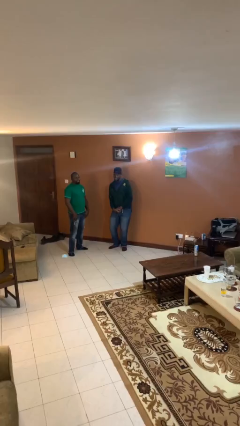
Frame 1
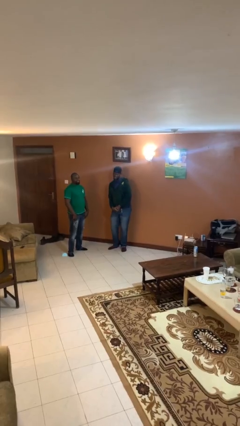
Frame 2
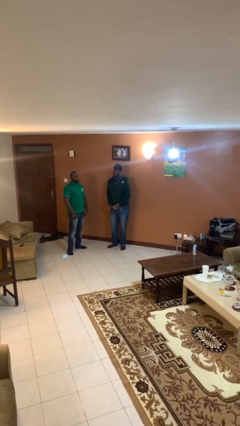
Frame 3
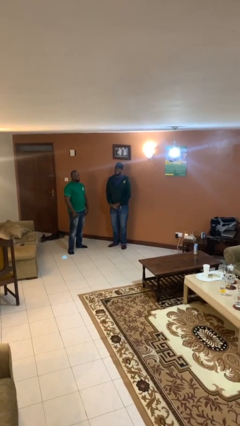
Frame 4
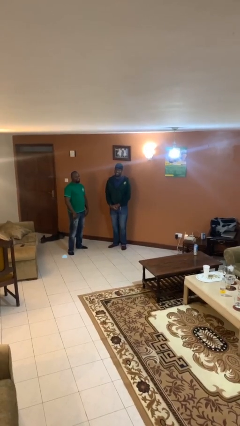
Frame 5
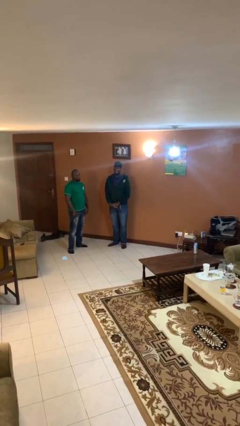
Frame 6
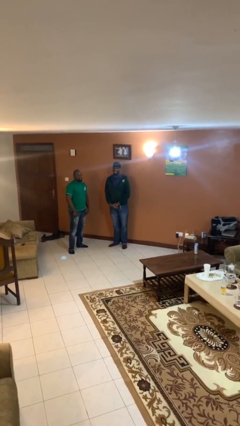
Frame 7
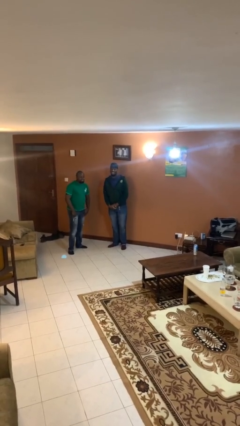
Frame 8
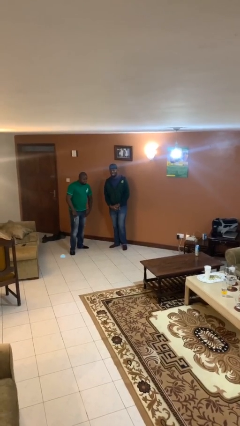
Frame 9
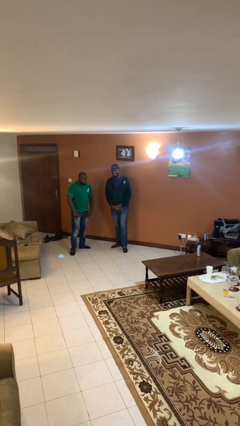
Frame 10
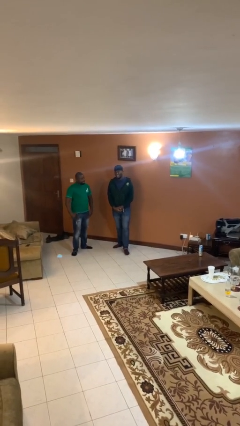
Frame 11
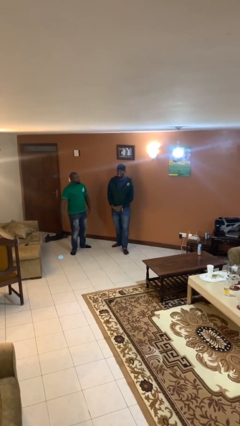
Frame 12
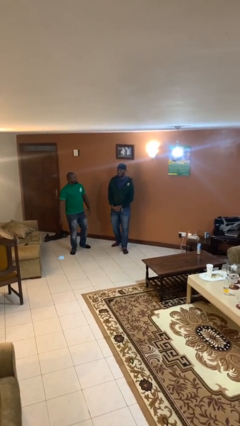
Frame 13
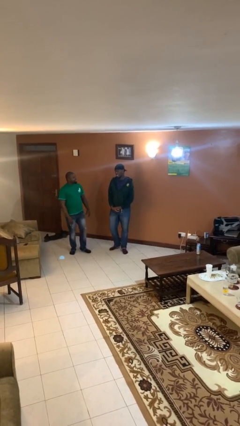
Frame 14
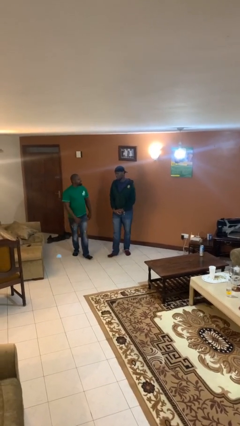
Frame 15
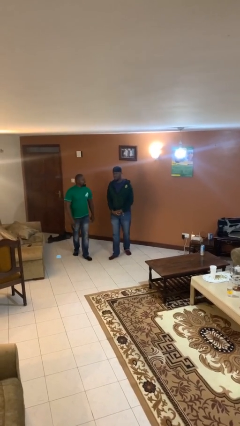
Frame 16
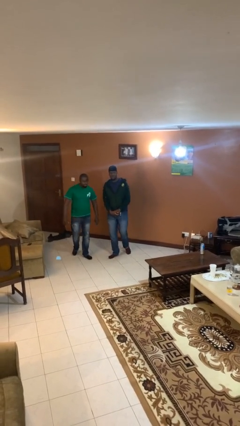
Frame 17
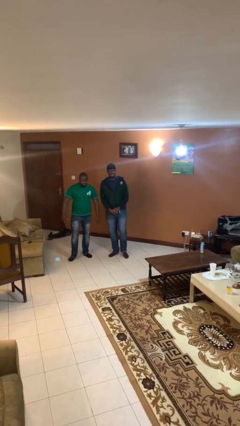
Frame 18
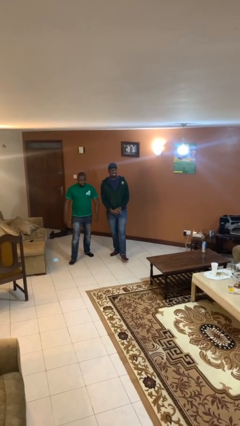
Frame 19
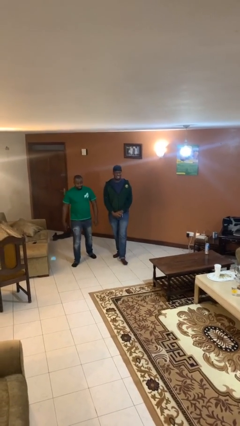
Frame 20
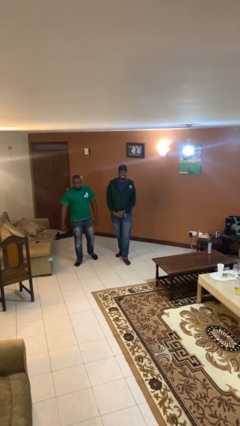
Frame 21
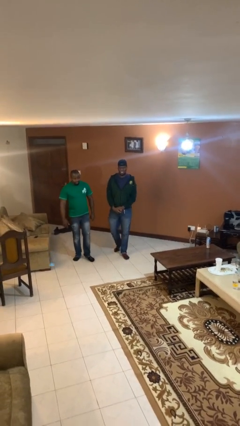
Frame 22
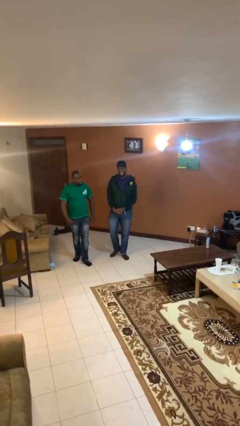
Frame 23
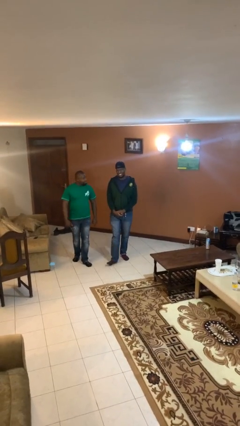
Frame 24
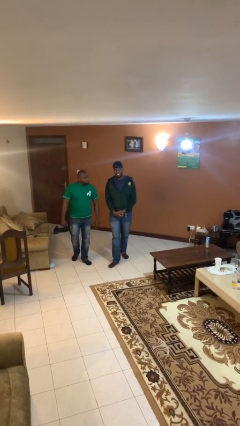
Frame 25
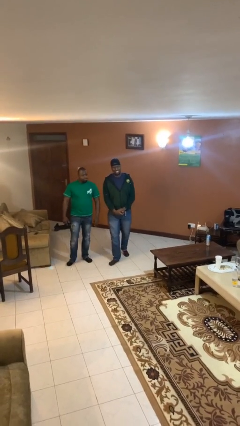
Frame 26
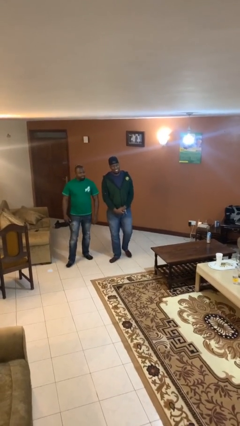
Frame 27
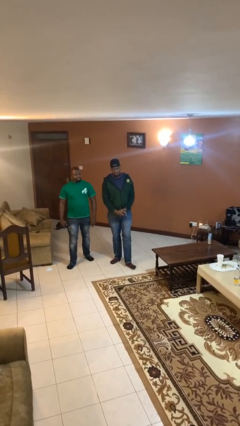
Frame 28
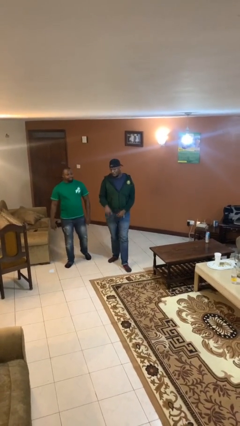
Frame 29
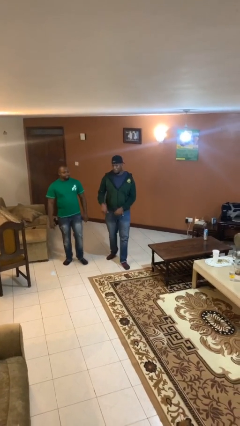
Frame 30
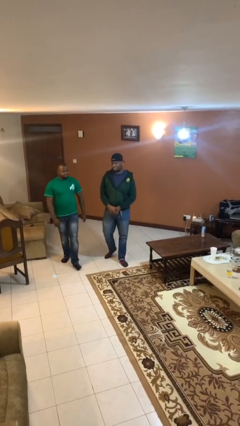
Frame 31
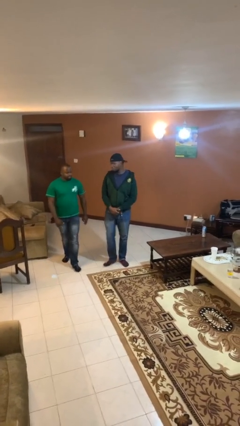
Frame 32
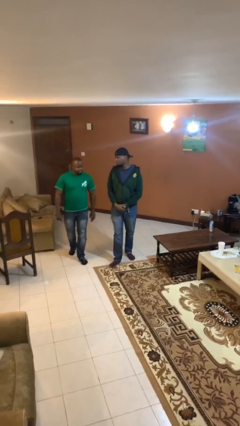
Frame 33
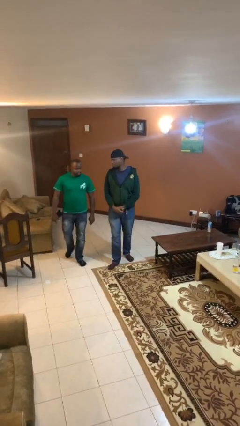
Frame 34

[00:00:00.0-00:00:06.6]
person talks to person

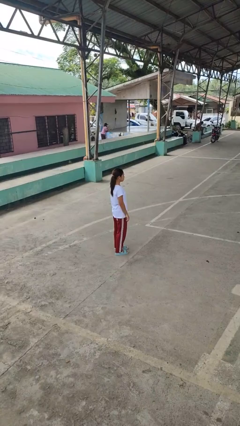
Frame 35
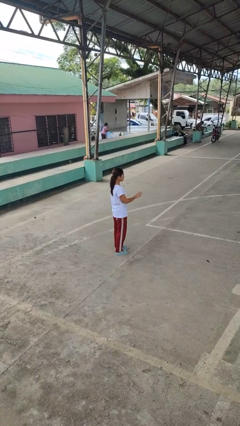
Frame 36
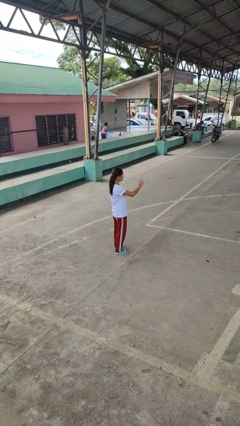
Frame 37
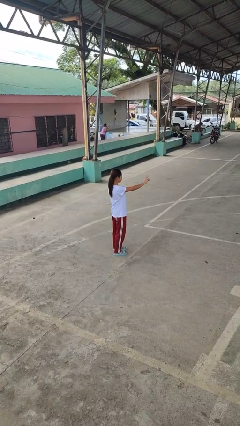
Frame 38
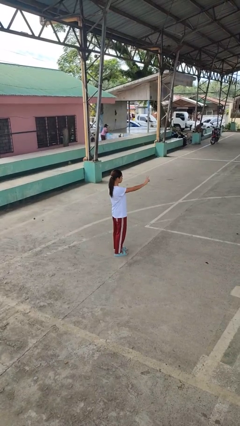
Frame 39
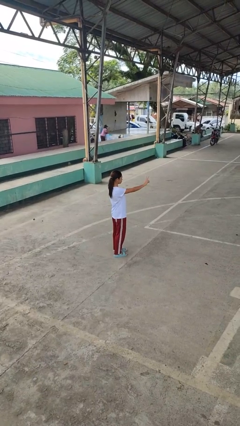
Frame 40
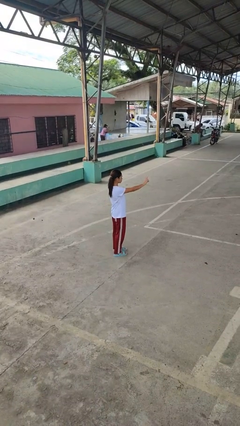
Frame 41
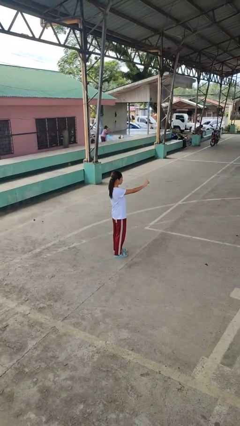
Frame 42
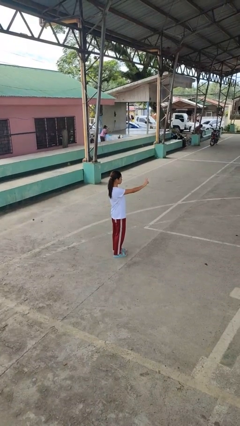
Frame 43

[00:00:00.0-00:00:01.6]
person gestures peace

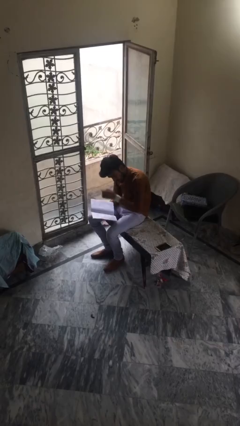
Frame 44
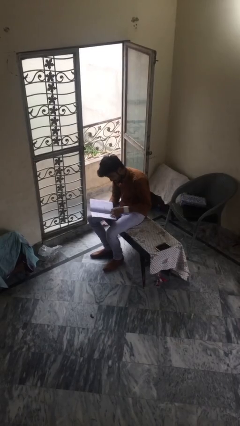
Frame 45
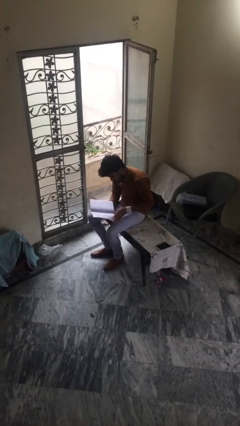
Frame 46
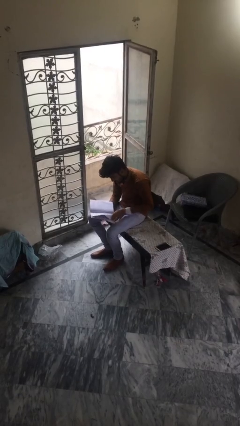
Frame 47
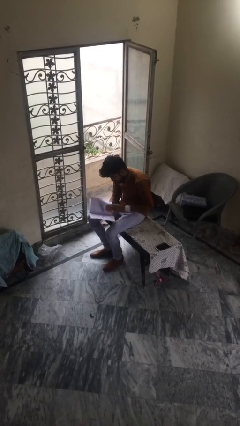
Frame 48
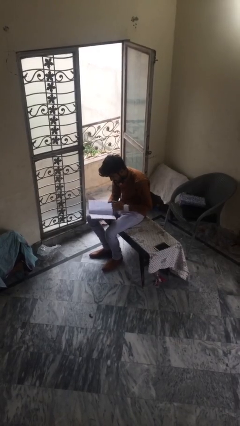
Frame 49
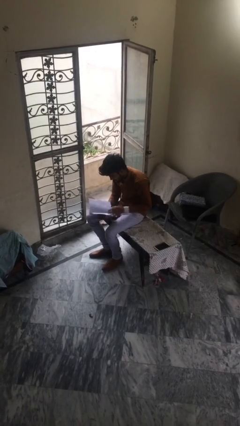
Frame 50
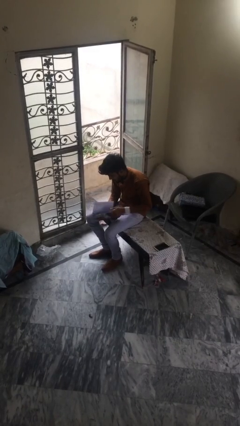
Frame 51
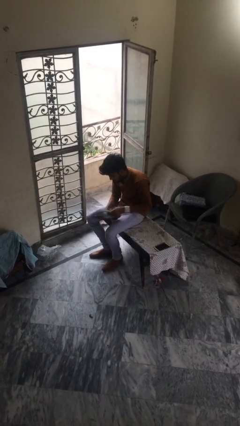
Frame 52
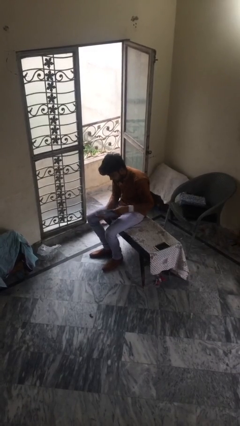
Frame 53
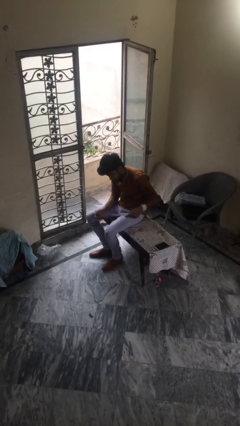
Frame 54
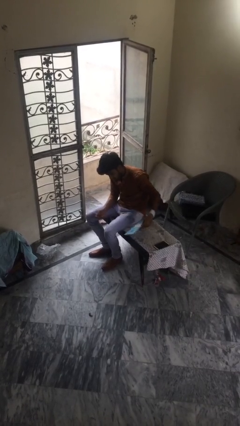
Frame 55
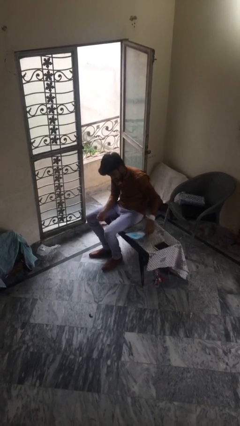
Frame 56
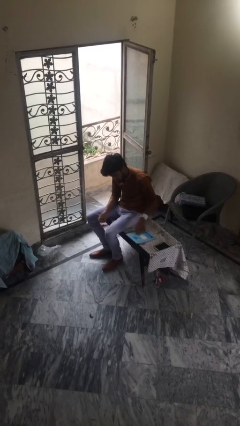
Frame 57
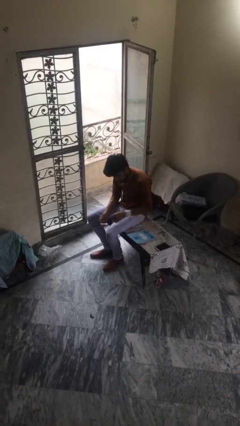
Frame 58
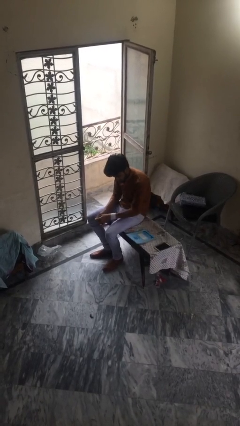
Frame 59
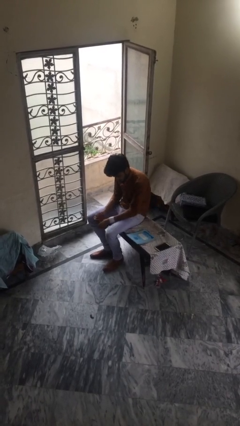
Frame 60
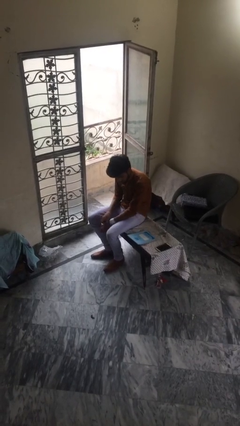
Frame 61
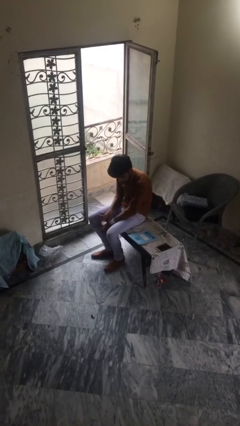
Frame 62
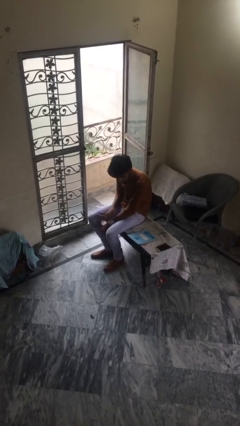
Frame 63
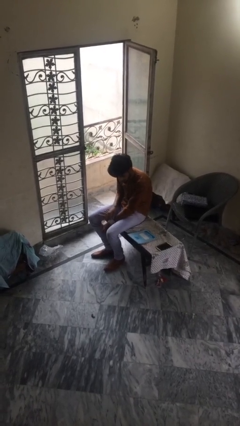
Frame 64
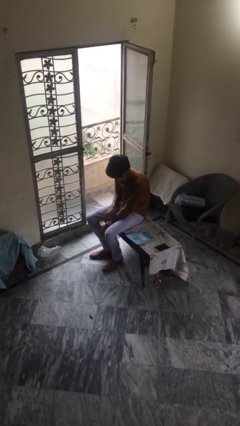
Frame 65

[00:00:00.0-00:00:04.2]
person puts down object on table

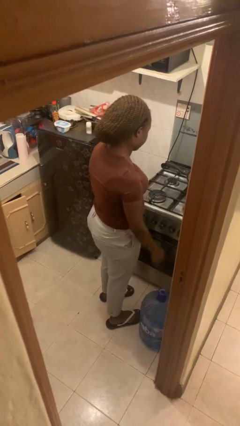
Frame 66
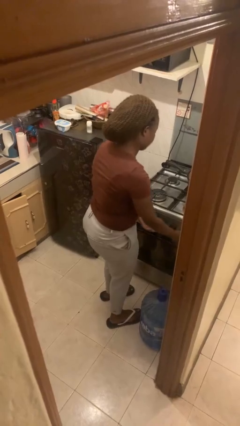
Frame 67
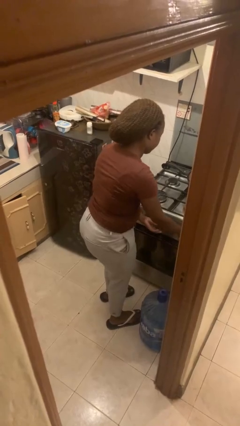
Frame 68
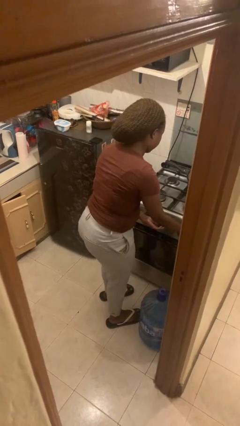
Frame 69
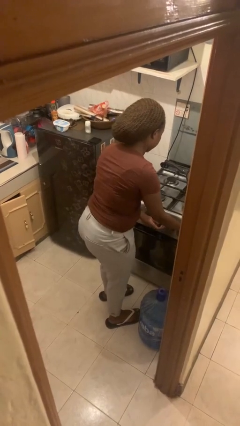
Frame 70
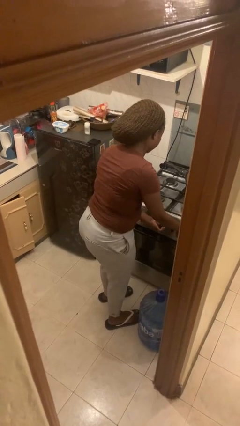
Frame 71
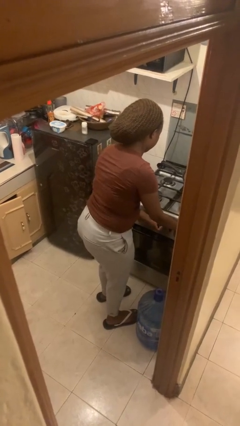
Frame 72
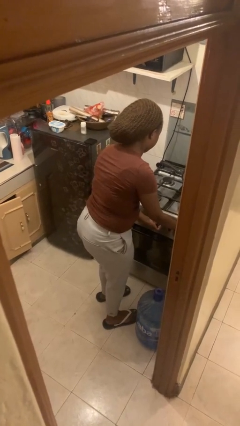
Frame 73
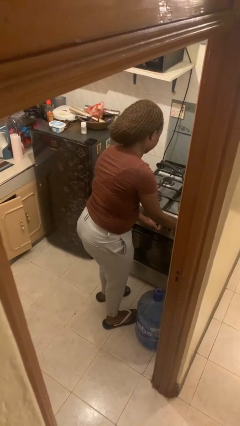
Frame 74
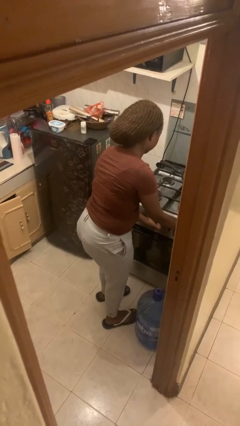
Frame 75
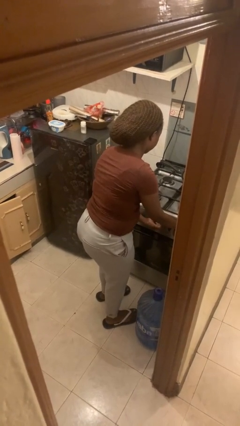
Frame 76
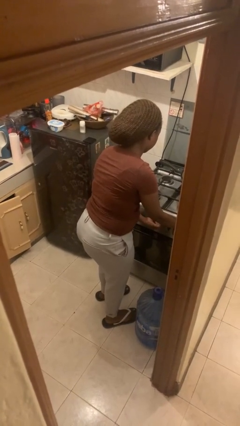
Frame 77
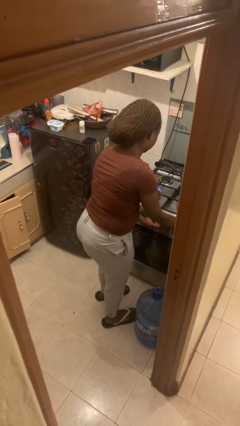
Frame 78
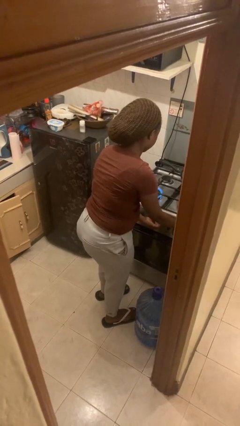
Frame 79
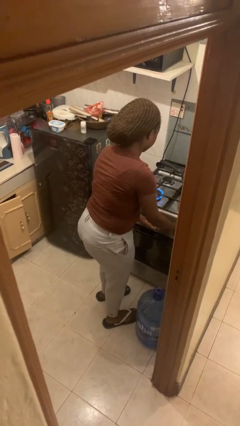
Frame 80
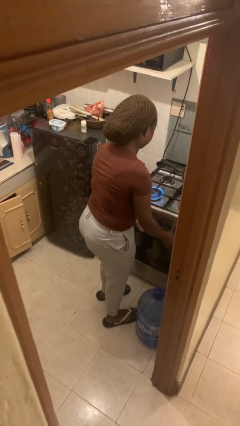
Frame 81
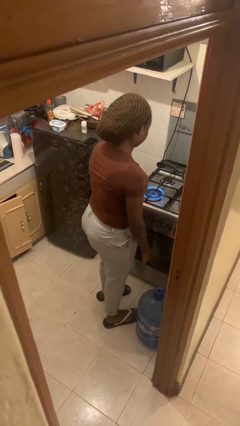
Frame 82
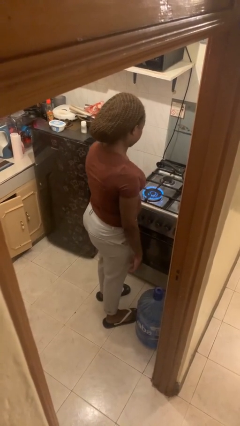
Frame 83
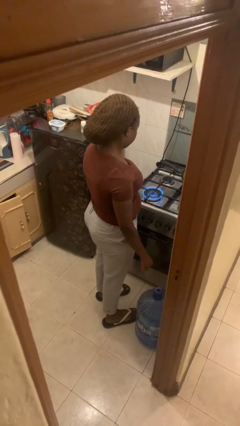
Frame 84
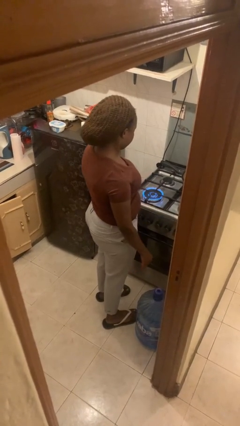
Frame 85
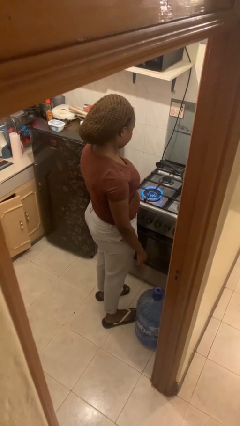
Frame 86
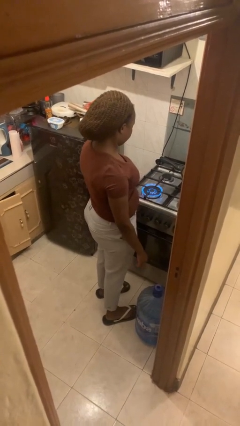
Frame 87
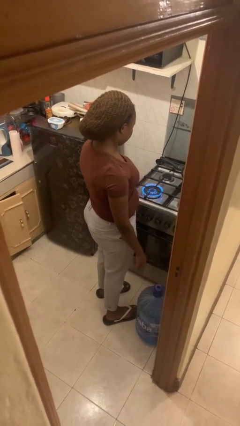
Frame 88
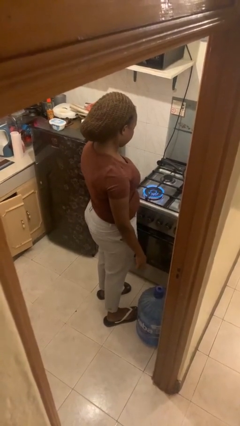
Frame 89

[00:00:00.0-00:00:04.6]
person turns on stovetop

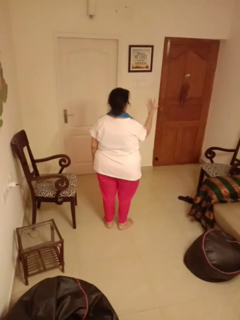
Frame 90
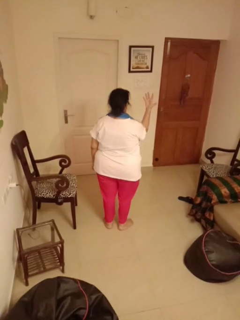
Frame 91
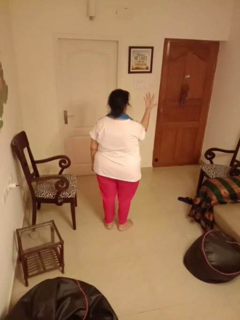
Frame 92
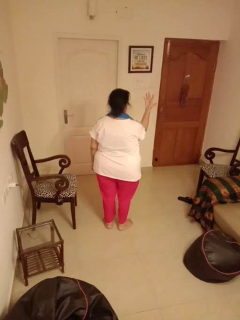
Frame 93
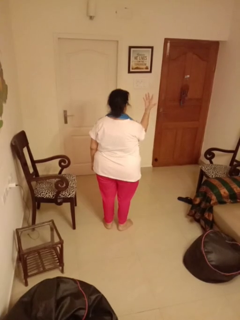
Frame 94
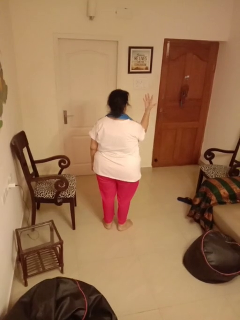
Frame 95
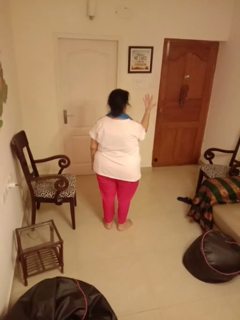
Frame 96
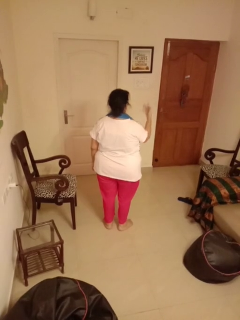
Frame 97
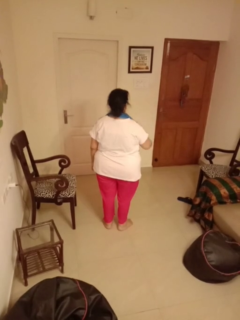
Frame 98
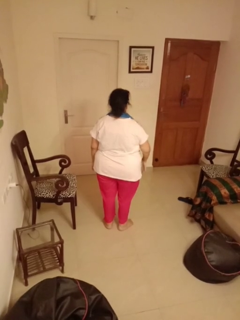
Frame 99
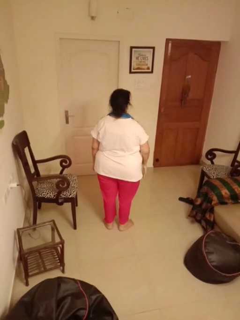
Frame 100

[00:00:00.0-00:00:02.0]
person gestures number five
